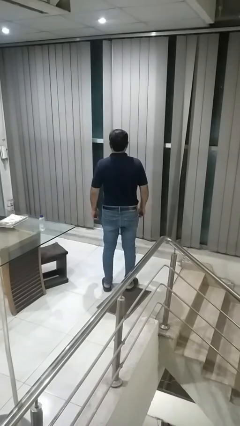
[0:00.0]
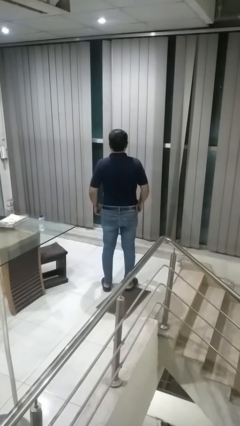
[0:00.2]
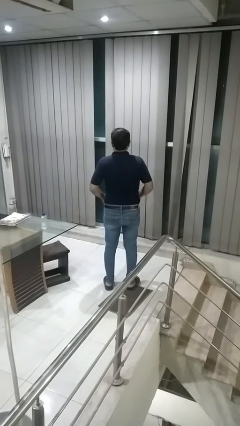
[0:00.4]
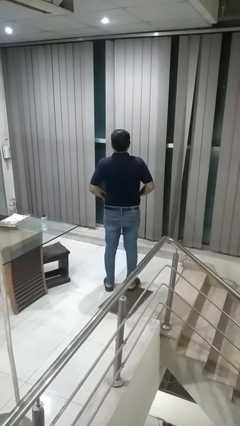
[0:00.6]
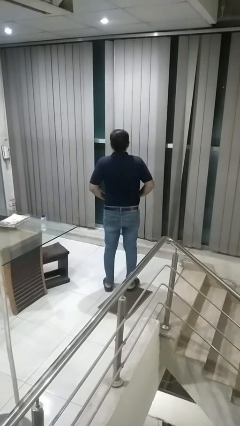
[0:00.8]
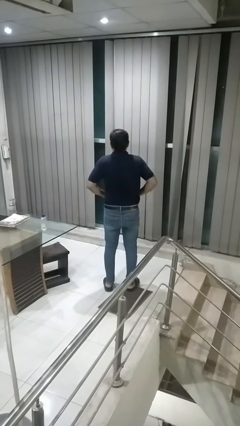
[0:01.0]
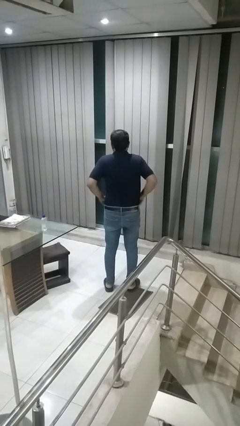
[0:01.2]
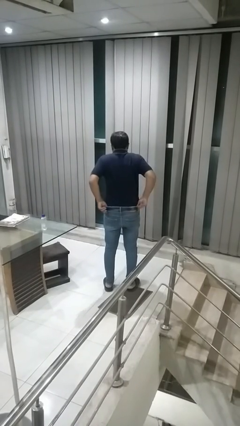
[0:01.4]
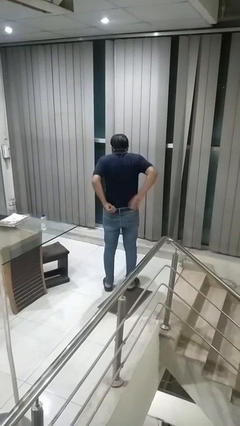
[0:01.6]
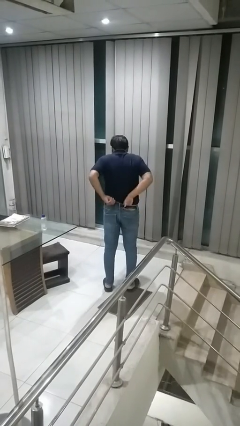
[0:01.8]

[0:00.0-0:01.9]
person hikes up pants

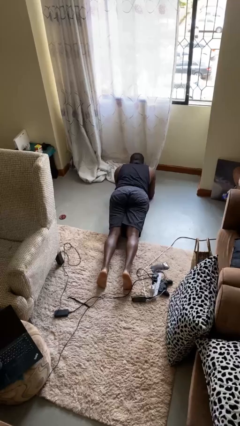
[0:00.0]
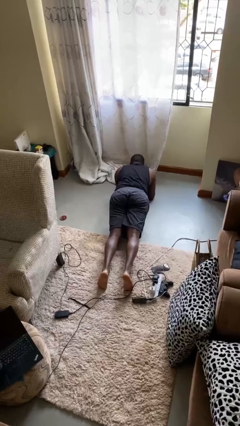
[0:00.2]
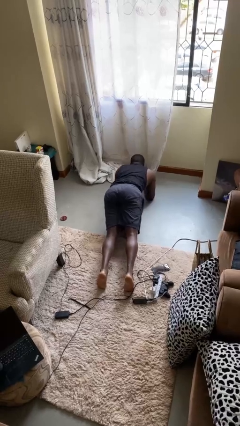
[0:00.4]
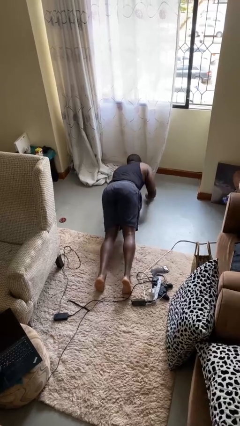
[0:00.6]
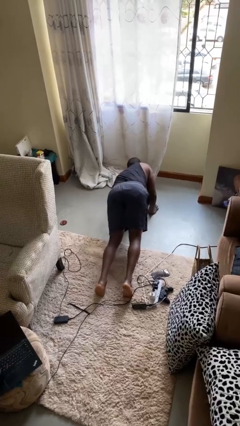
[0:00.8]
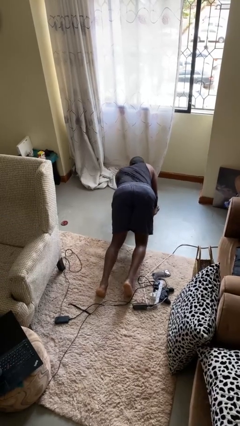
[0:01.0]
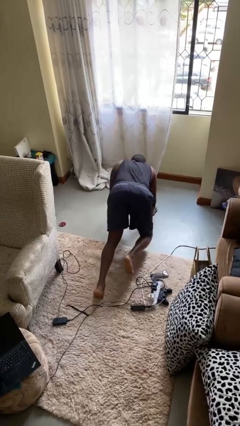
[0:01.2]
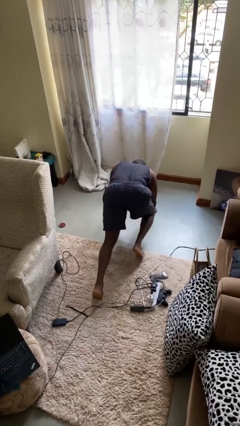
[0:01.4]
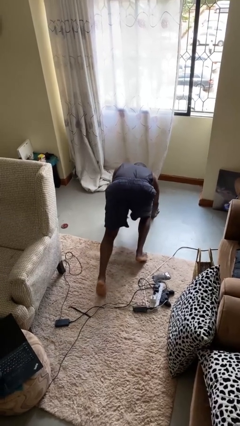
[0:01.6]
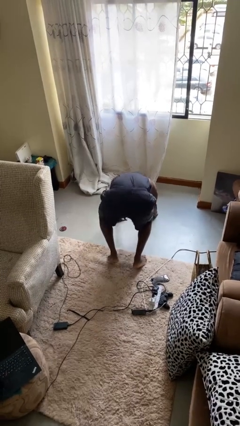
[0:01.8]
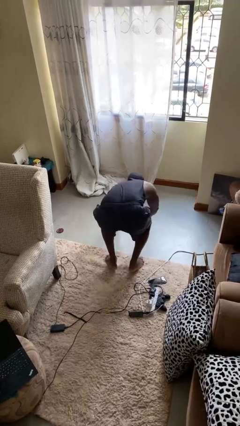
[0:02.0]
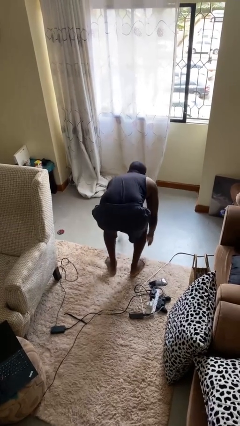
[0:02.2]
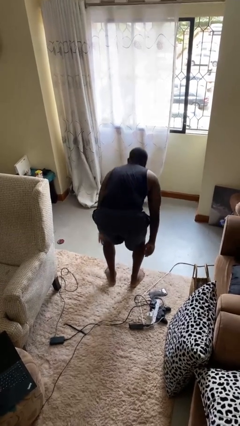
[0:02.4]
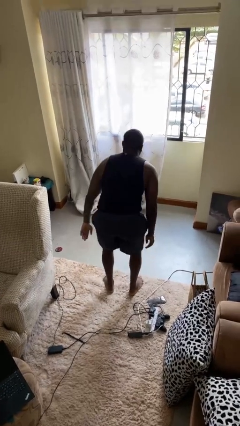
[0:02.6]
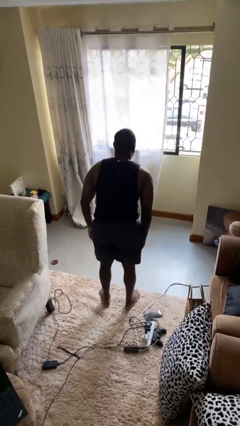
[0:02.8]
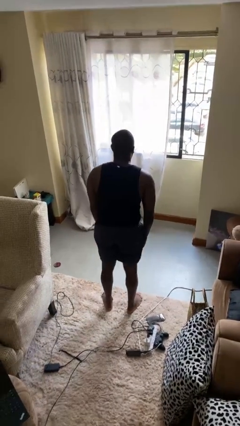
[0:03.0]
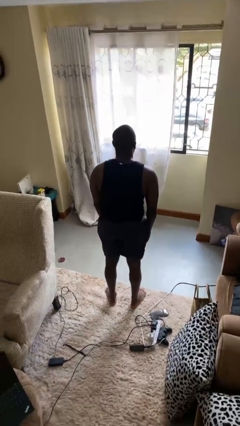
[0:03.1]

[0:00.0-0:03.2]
person stands up from floor

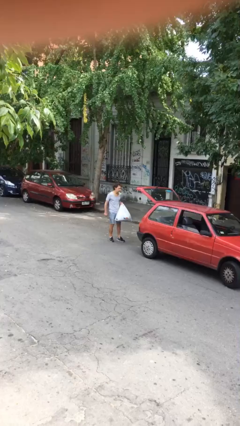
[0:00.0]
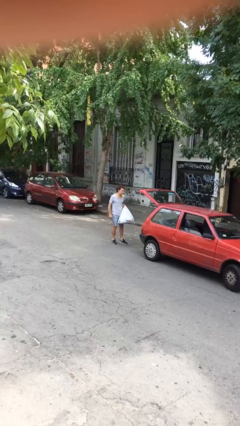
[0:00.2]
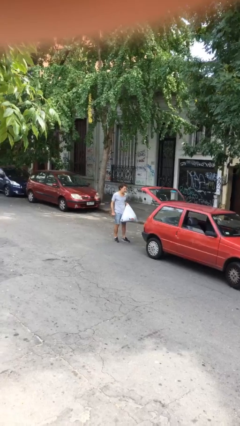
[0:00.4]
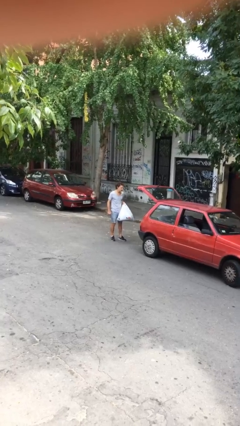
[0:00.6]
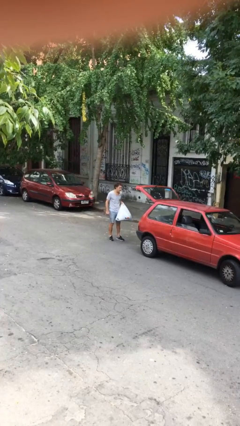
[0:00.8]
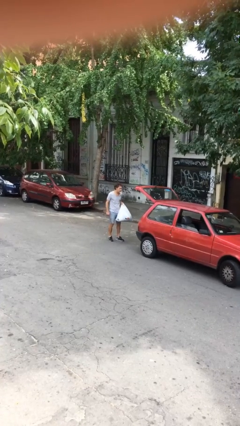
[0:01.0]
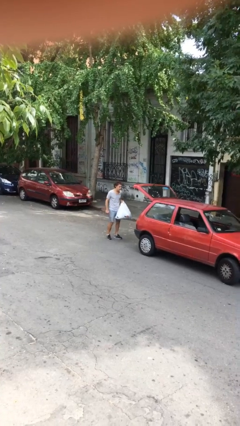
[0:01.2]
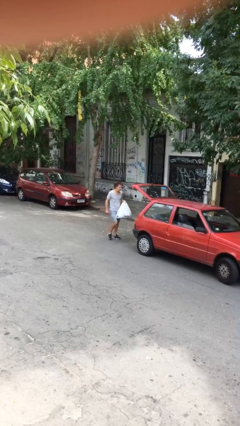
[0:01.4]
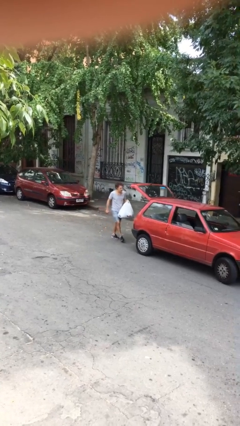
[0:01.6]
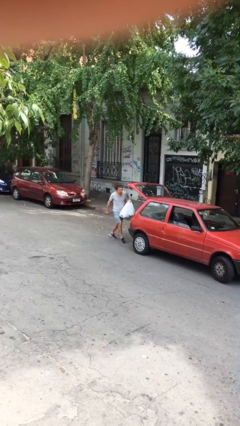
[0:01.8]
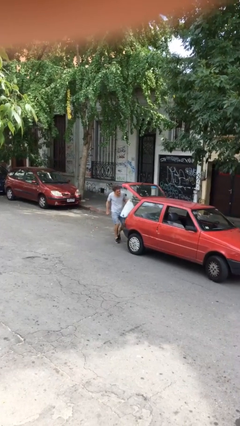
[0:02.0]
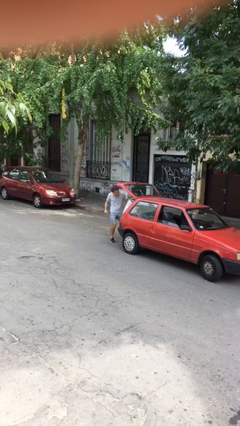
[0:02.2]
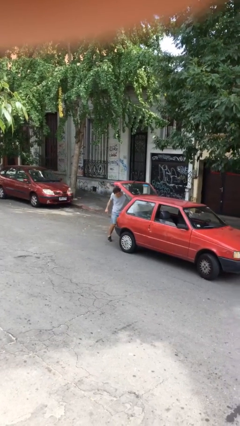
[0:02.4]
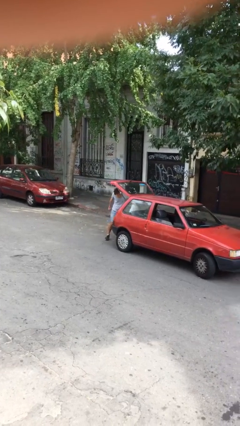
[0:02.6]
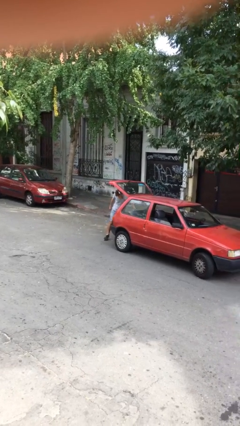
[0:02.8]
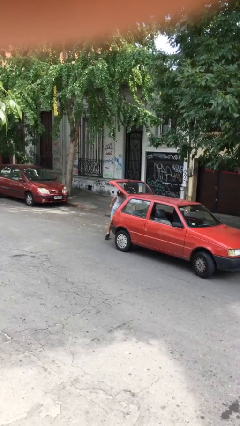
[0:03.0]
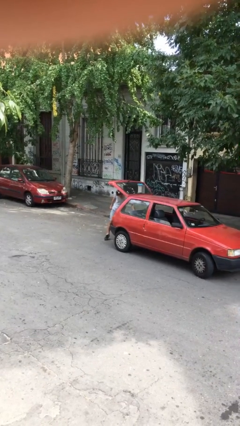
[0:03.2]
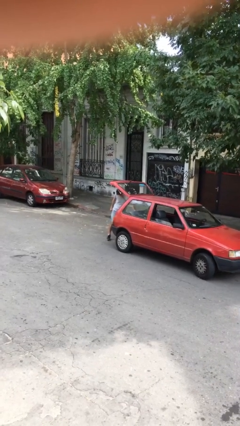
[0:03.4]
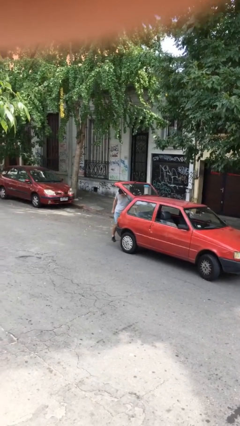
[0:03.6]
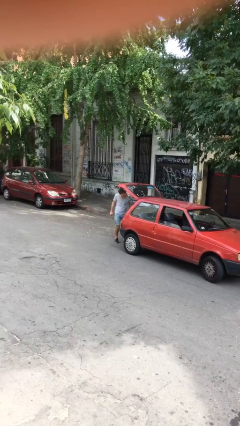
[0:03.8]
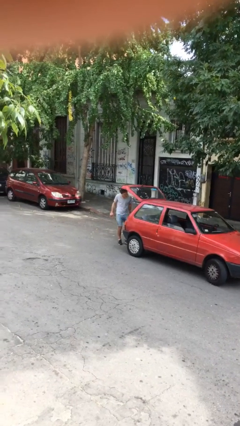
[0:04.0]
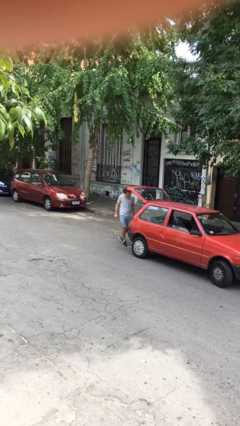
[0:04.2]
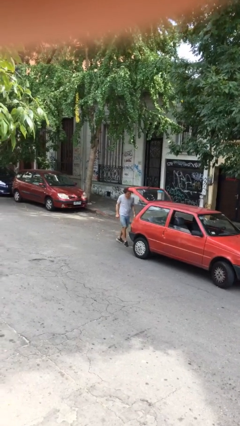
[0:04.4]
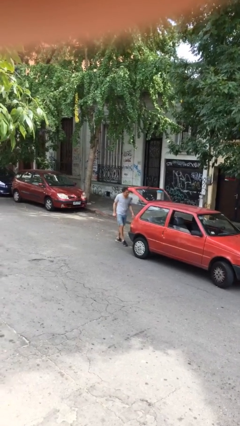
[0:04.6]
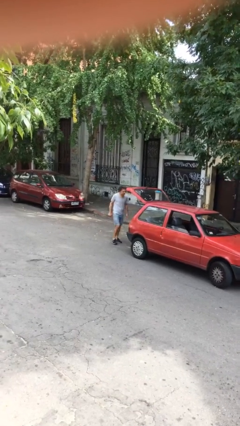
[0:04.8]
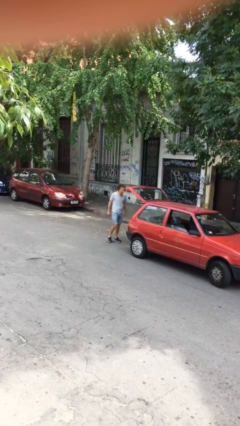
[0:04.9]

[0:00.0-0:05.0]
person loads car

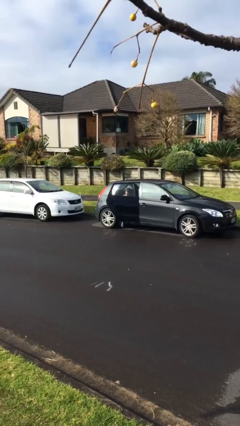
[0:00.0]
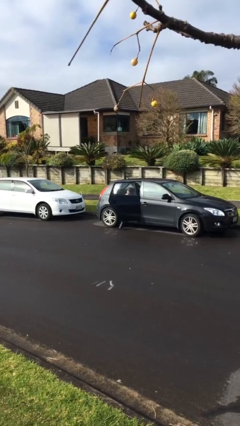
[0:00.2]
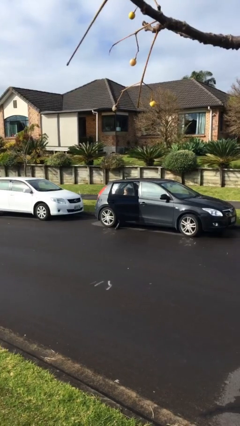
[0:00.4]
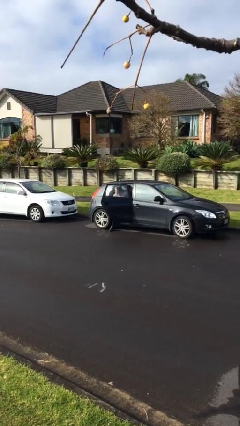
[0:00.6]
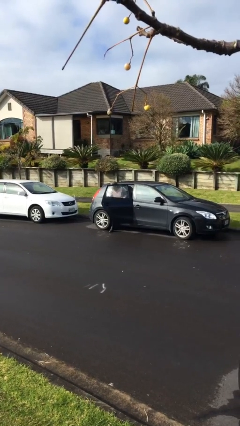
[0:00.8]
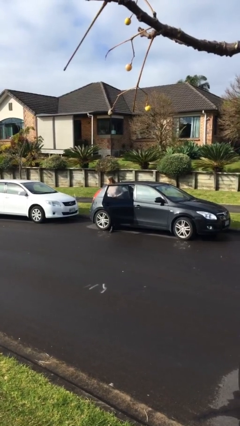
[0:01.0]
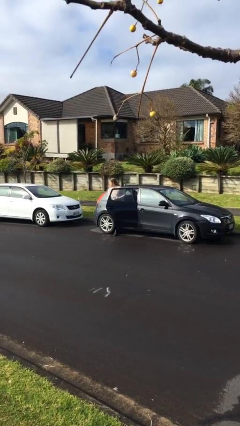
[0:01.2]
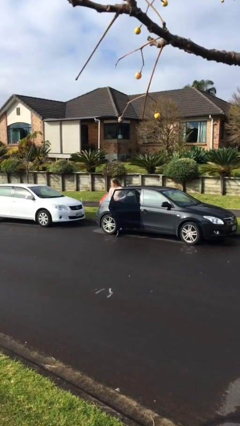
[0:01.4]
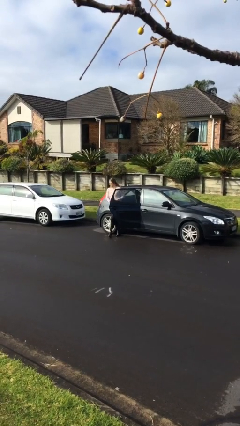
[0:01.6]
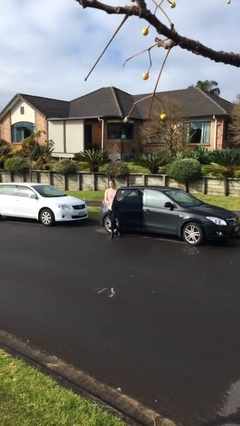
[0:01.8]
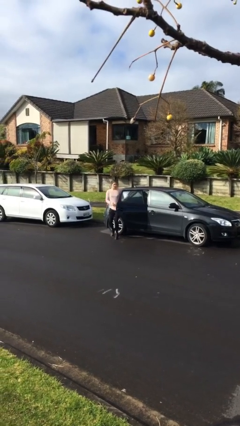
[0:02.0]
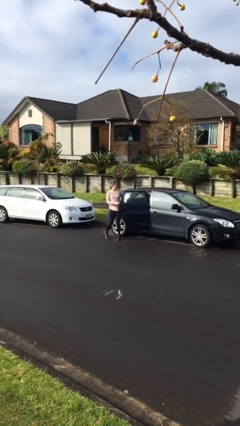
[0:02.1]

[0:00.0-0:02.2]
person exits car

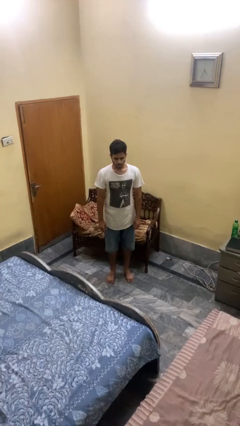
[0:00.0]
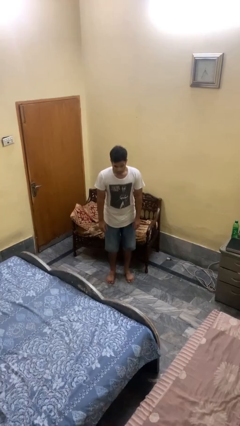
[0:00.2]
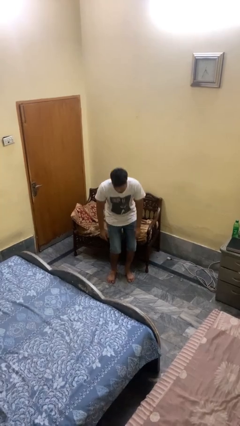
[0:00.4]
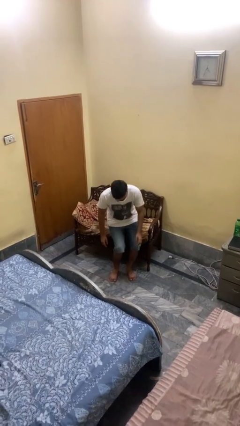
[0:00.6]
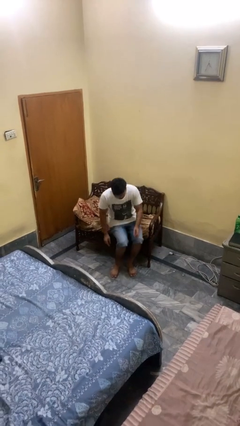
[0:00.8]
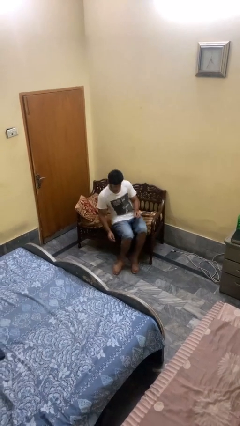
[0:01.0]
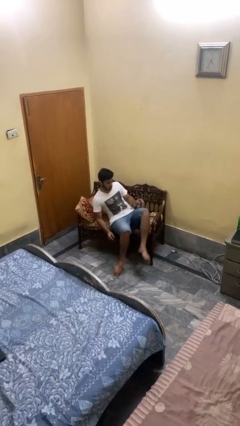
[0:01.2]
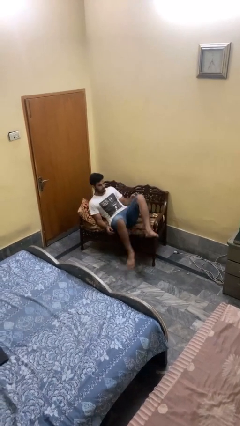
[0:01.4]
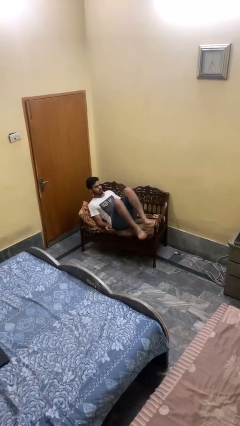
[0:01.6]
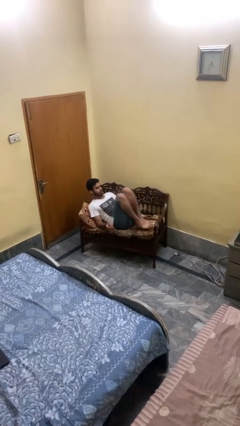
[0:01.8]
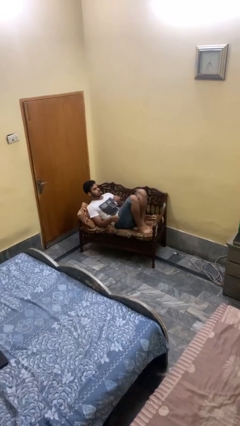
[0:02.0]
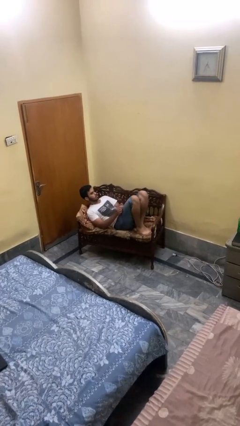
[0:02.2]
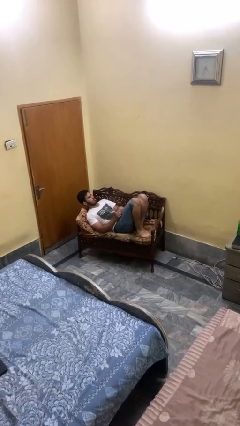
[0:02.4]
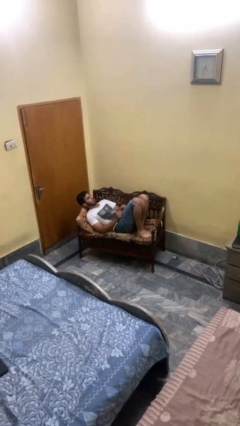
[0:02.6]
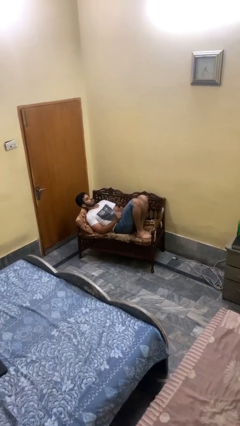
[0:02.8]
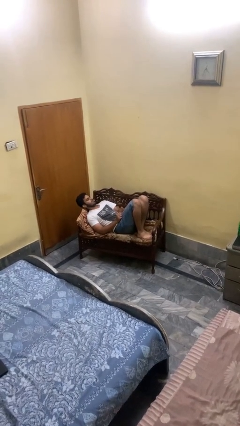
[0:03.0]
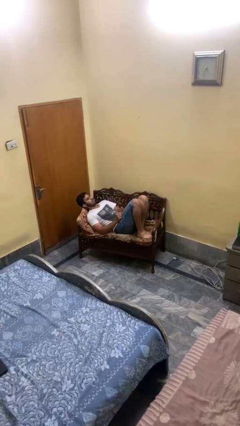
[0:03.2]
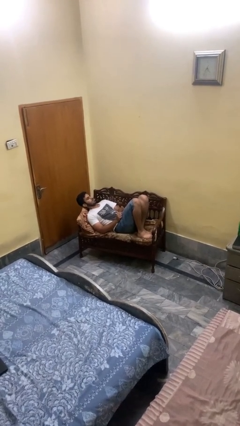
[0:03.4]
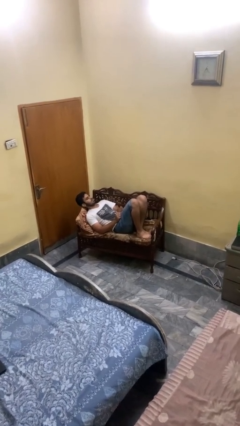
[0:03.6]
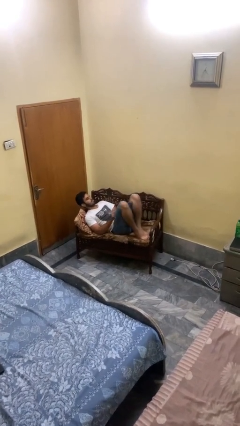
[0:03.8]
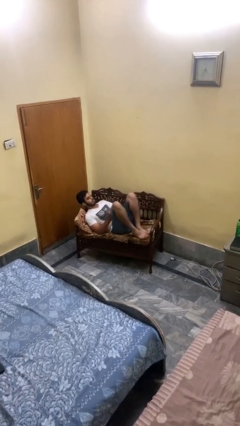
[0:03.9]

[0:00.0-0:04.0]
person lies down on couch

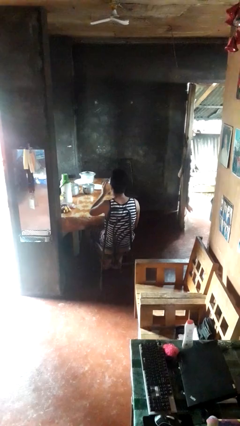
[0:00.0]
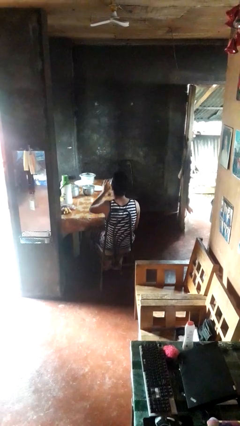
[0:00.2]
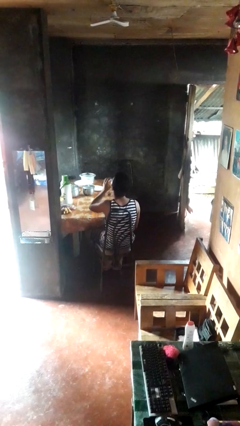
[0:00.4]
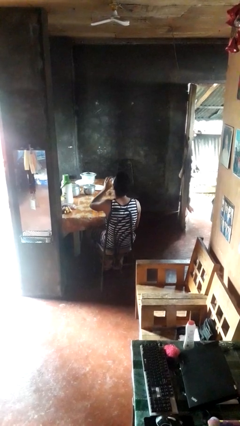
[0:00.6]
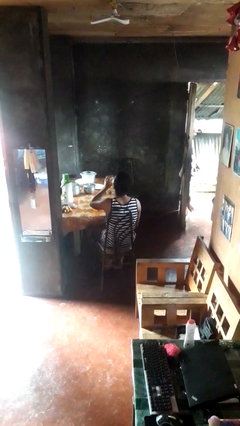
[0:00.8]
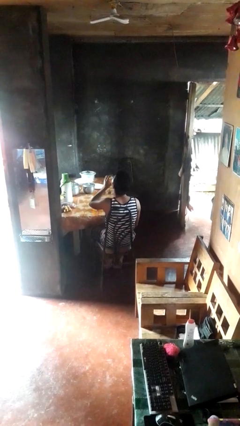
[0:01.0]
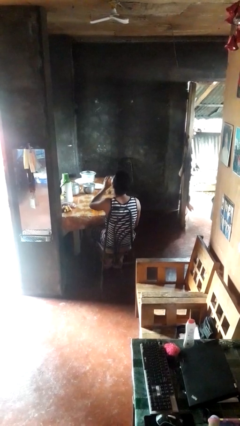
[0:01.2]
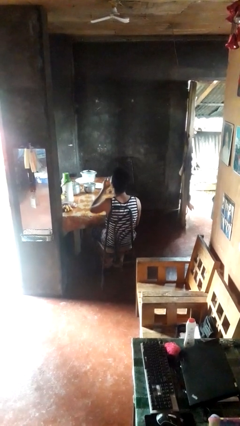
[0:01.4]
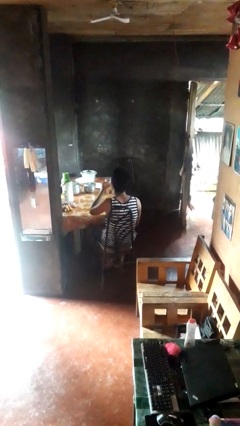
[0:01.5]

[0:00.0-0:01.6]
person drinks from shotglass
